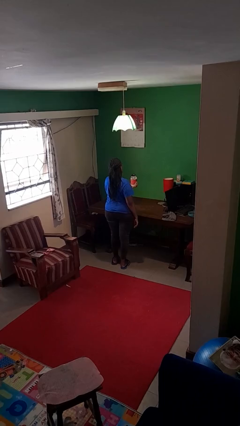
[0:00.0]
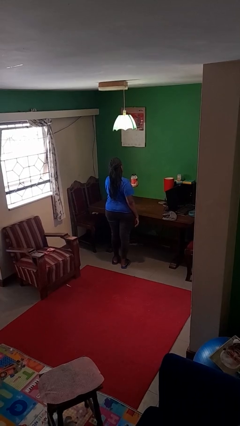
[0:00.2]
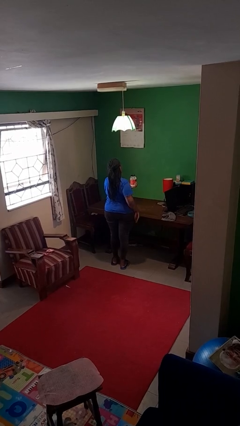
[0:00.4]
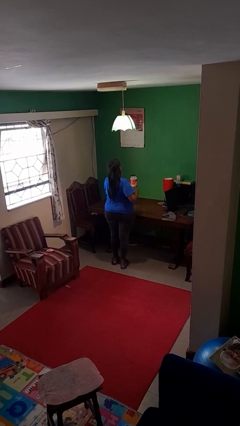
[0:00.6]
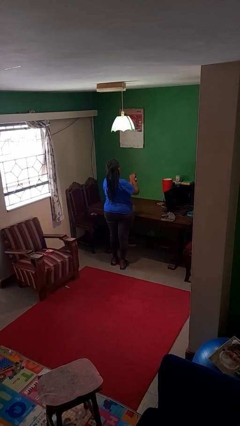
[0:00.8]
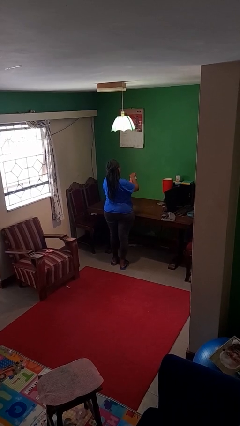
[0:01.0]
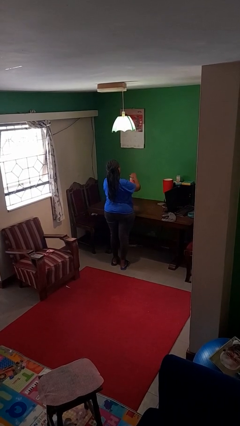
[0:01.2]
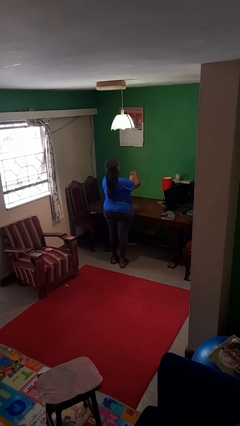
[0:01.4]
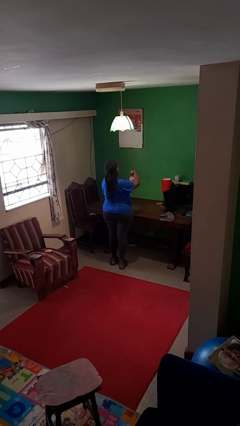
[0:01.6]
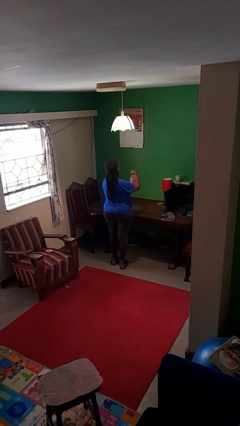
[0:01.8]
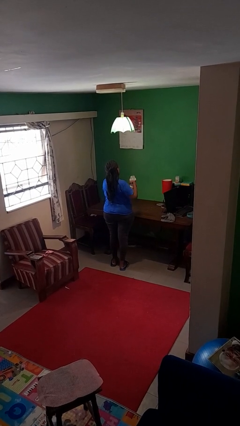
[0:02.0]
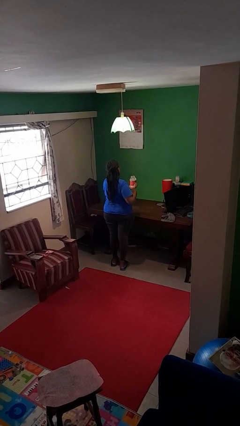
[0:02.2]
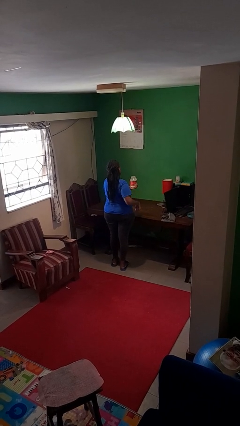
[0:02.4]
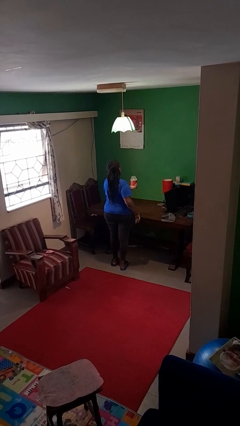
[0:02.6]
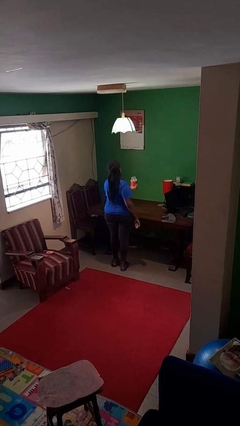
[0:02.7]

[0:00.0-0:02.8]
person opens jar

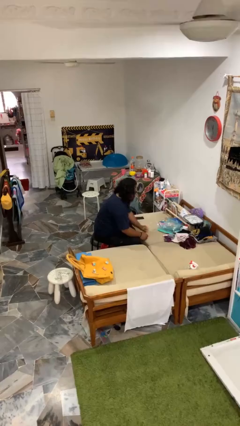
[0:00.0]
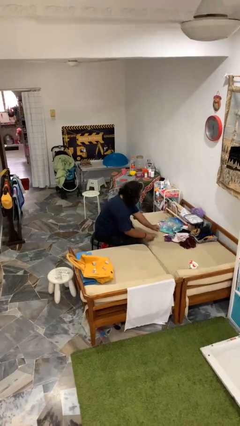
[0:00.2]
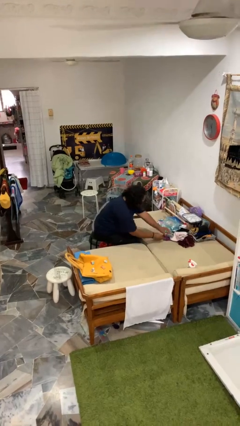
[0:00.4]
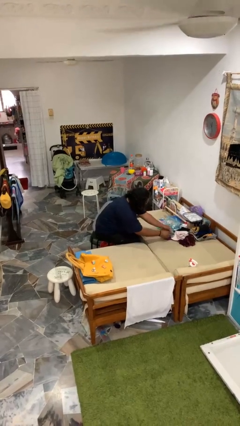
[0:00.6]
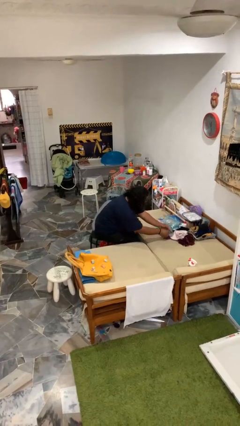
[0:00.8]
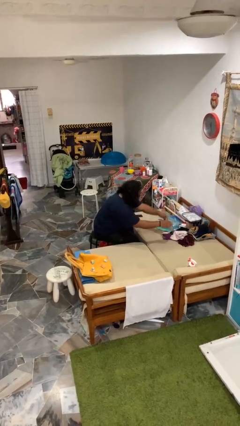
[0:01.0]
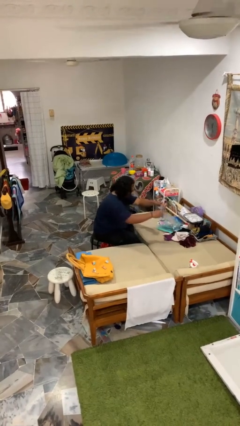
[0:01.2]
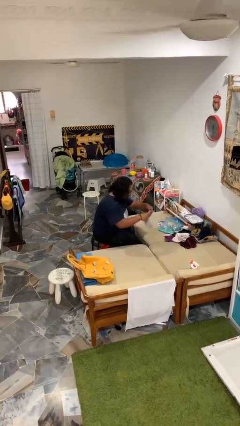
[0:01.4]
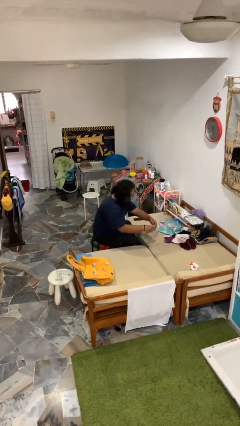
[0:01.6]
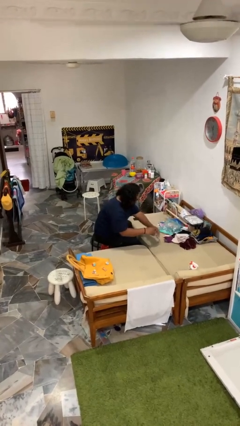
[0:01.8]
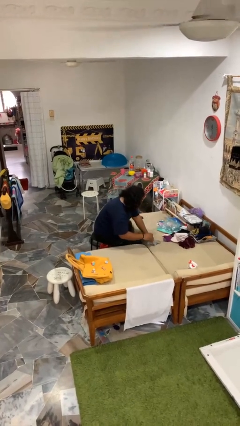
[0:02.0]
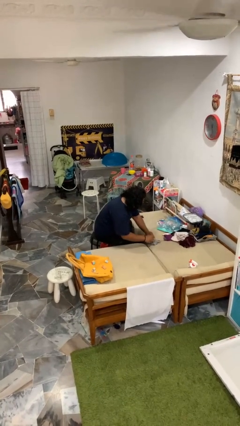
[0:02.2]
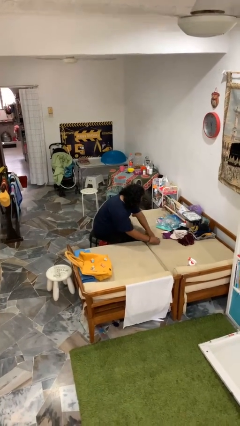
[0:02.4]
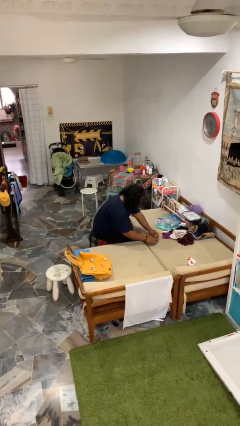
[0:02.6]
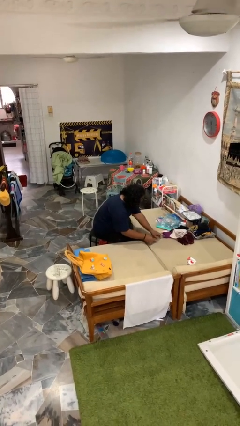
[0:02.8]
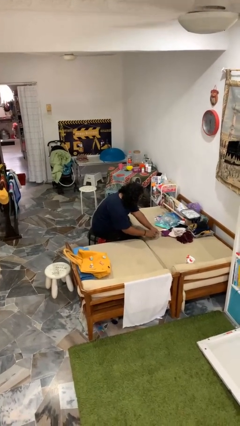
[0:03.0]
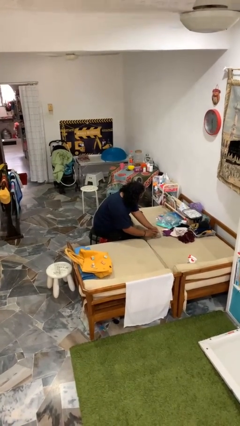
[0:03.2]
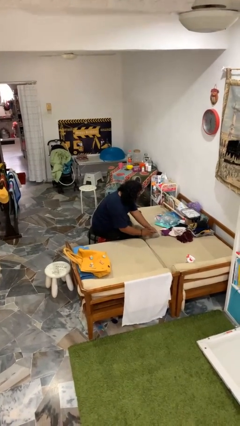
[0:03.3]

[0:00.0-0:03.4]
person folds socks

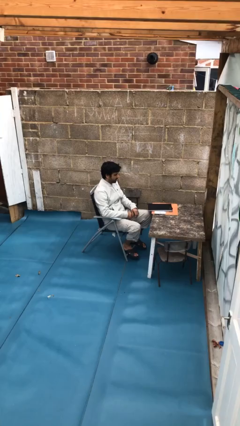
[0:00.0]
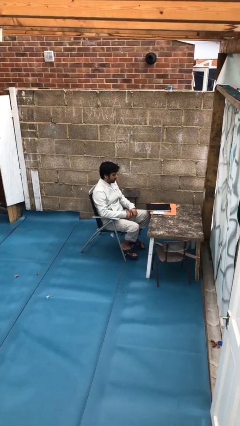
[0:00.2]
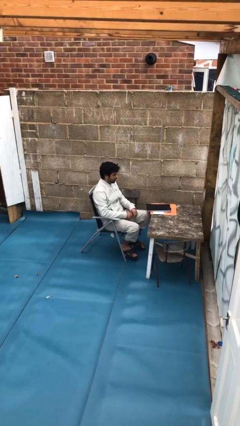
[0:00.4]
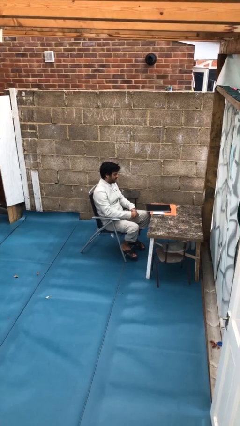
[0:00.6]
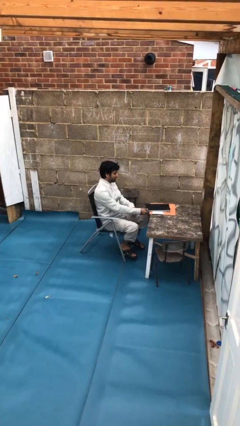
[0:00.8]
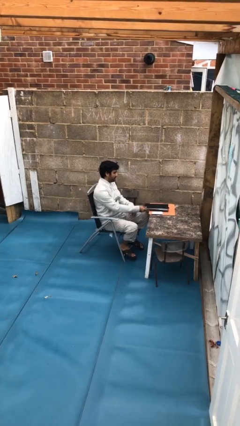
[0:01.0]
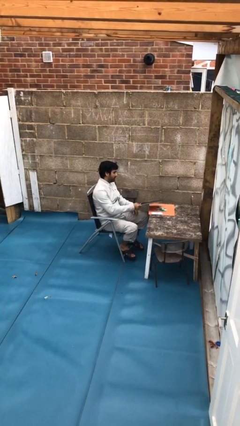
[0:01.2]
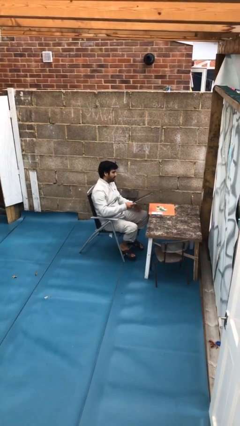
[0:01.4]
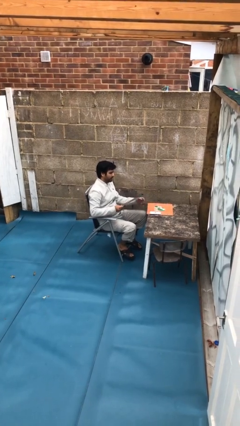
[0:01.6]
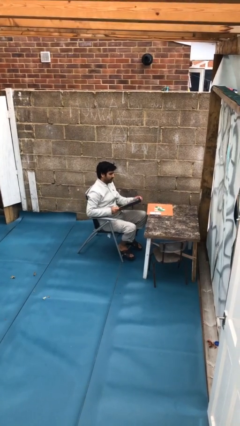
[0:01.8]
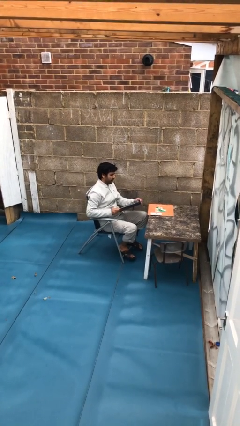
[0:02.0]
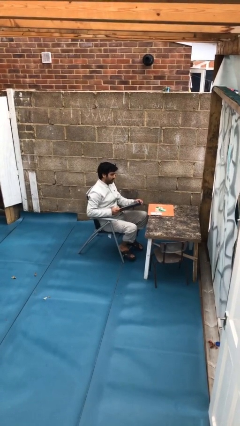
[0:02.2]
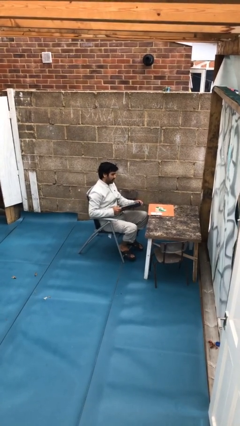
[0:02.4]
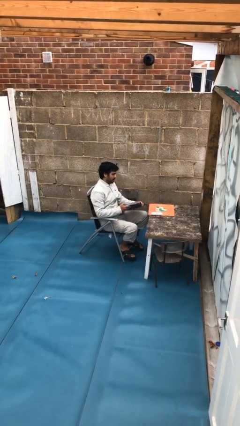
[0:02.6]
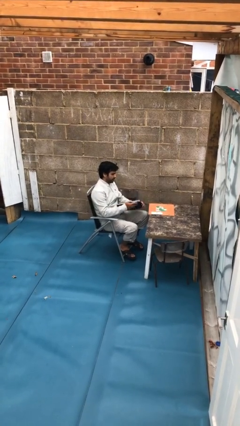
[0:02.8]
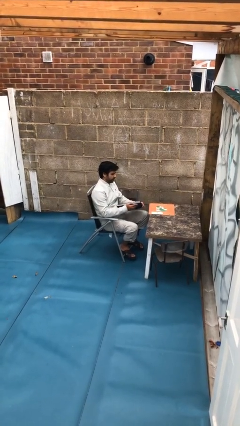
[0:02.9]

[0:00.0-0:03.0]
person picks up object from table

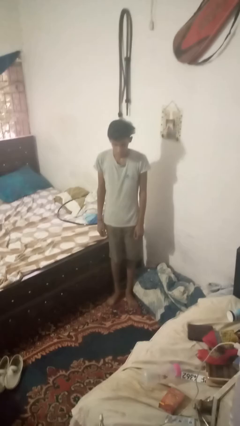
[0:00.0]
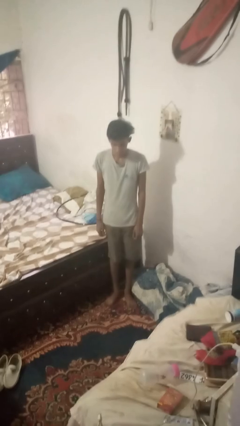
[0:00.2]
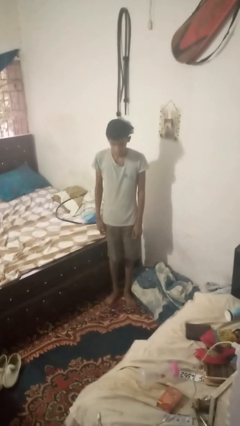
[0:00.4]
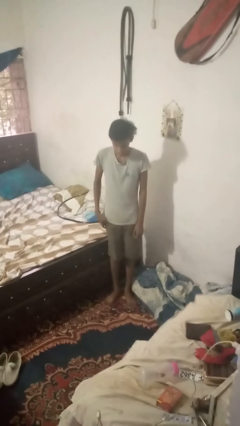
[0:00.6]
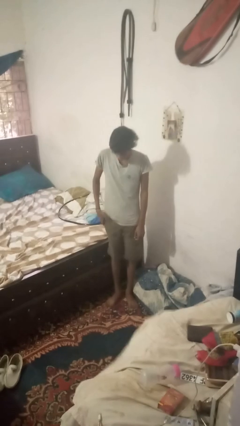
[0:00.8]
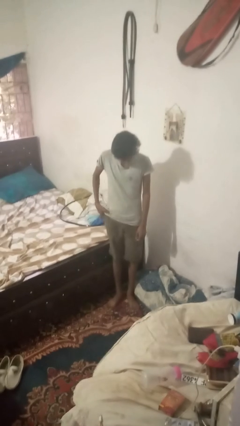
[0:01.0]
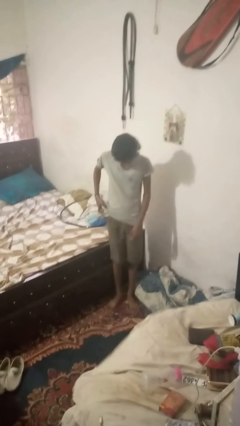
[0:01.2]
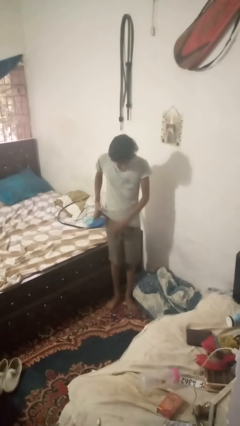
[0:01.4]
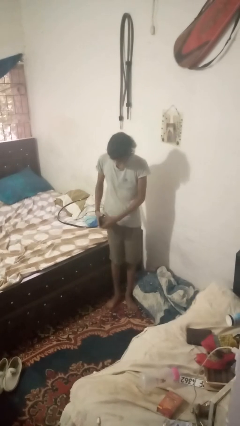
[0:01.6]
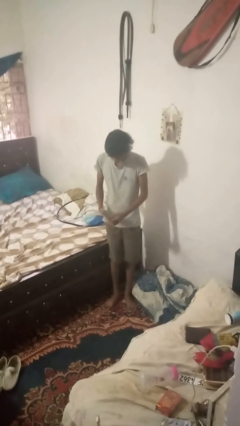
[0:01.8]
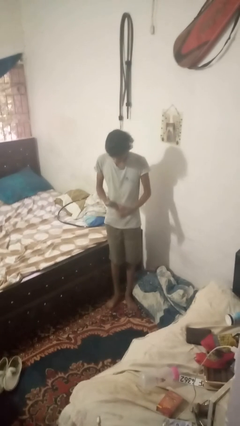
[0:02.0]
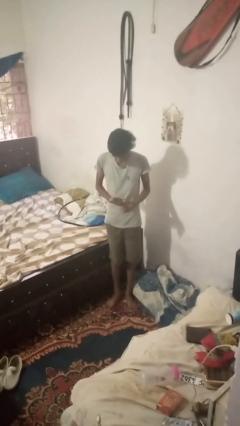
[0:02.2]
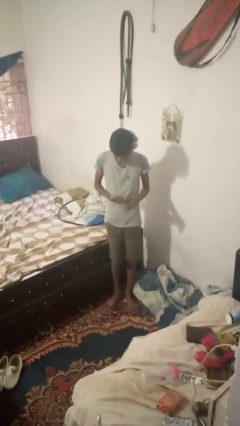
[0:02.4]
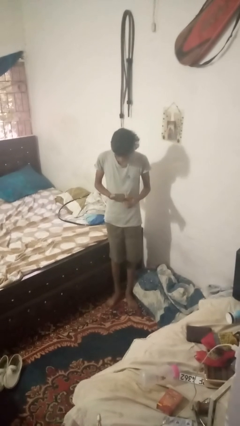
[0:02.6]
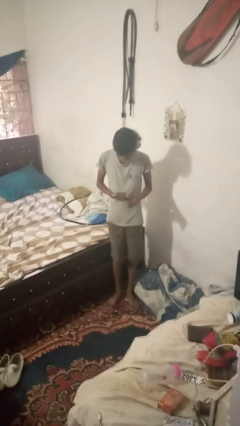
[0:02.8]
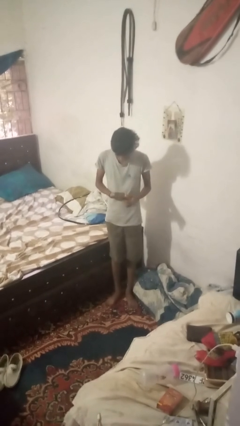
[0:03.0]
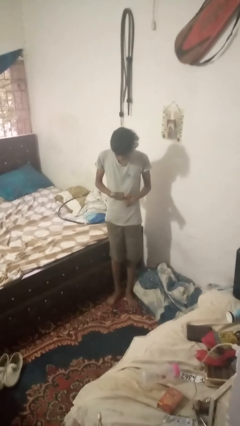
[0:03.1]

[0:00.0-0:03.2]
person takes phone from pocket

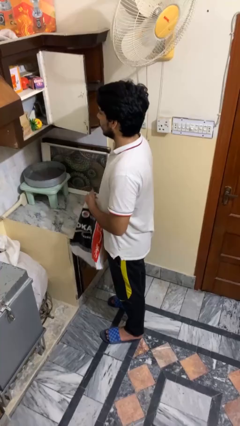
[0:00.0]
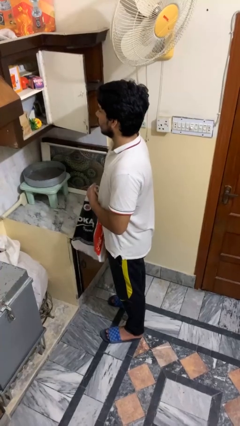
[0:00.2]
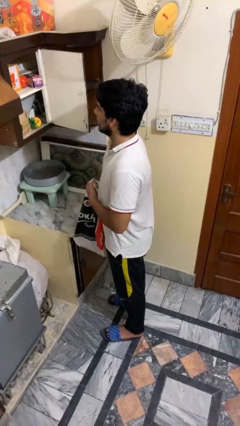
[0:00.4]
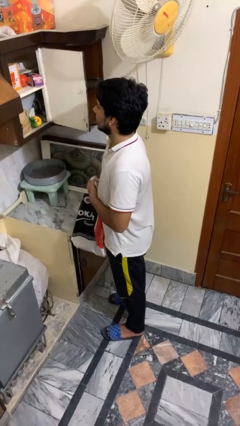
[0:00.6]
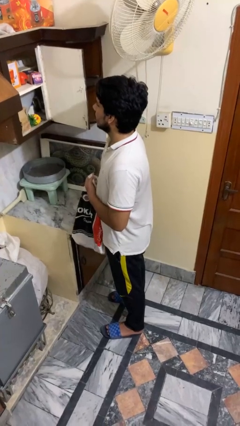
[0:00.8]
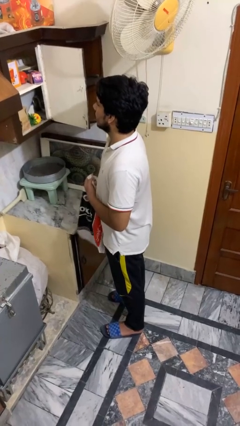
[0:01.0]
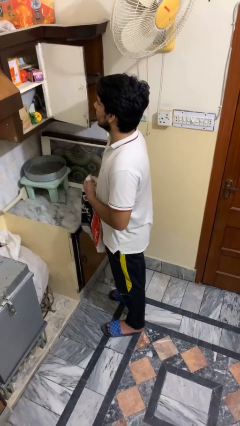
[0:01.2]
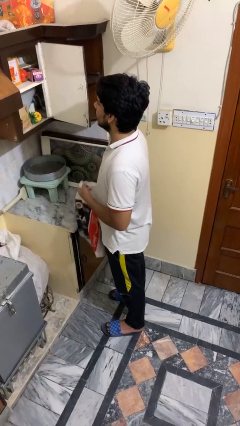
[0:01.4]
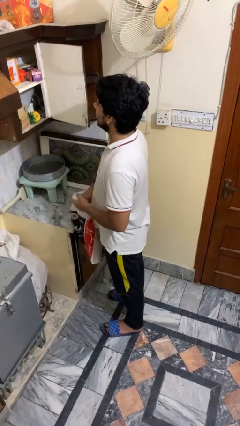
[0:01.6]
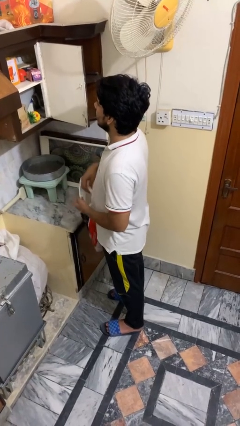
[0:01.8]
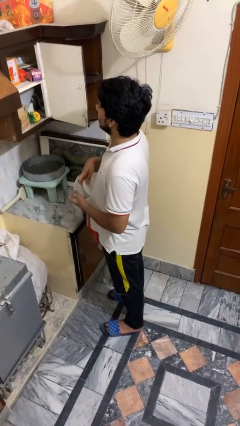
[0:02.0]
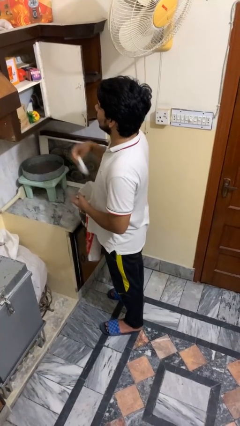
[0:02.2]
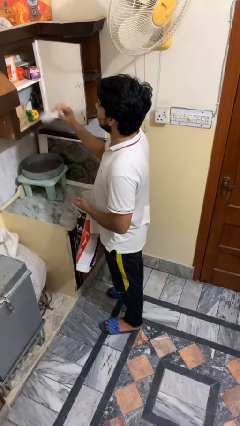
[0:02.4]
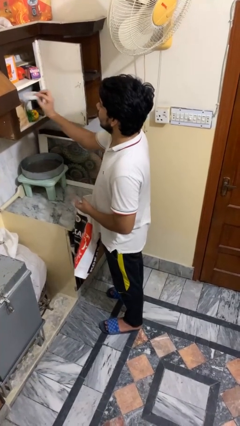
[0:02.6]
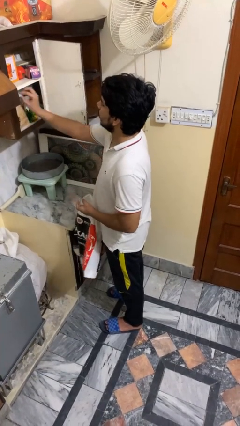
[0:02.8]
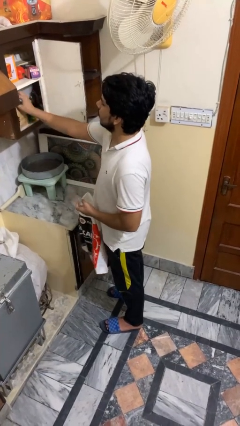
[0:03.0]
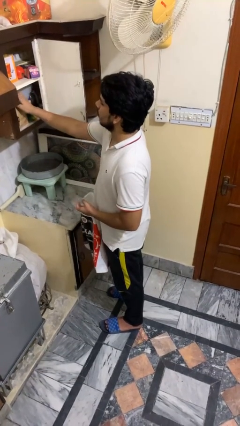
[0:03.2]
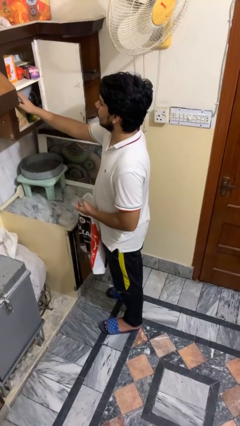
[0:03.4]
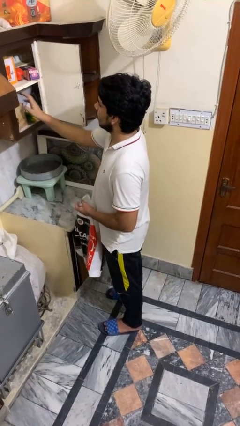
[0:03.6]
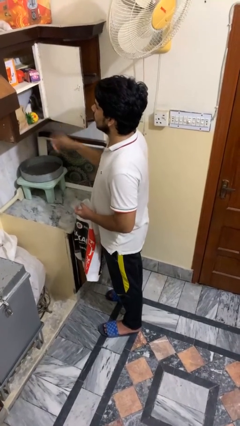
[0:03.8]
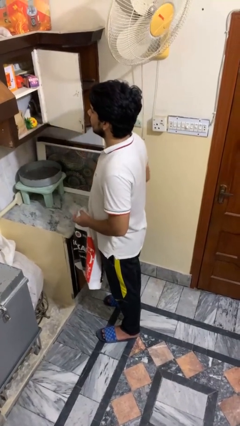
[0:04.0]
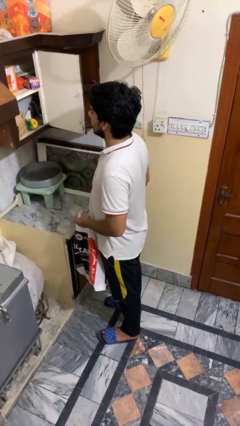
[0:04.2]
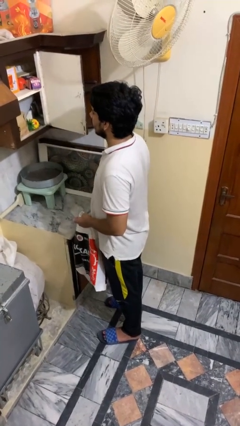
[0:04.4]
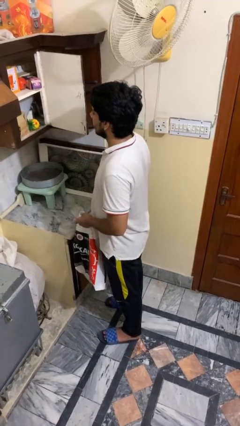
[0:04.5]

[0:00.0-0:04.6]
person loads groceries into cabinet

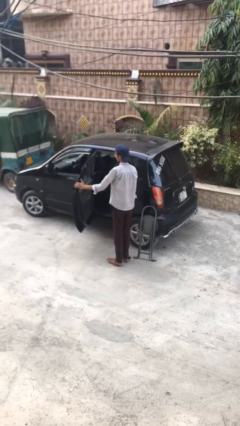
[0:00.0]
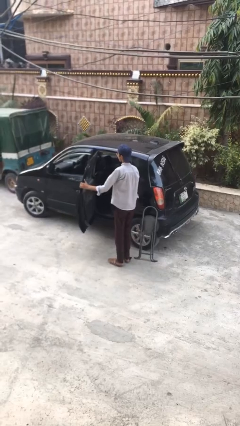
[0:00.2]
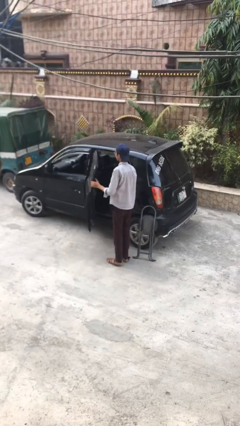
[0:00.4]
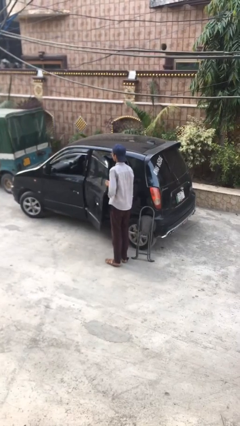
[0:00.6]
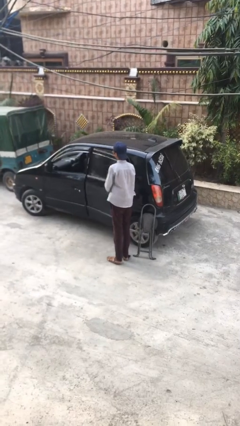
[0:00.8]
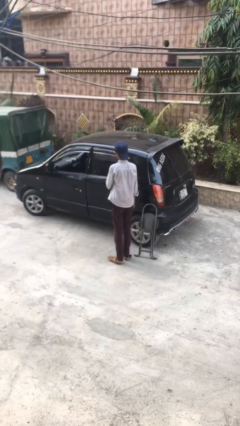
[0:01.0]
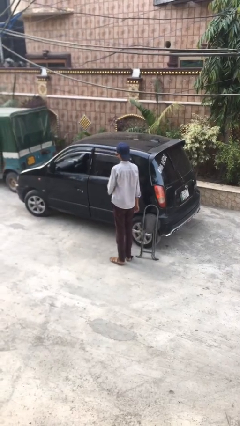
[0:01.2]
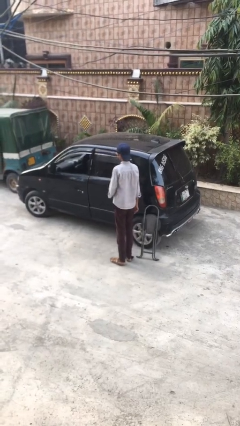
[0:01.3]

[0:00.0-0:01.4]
person closes car door
